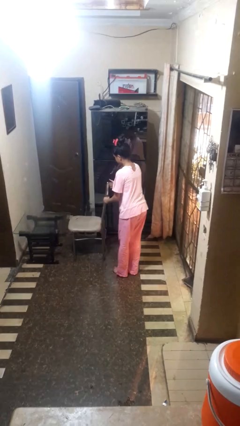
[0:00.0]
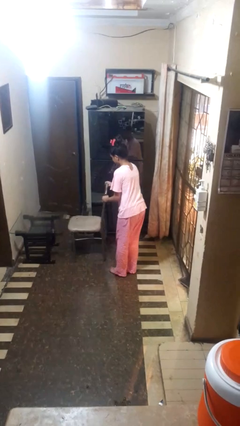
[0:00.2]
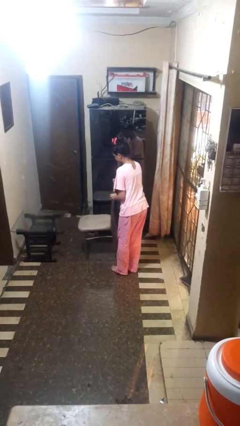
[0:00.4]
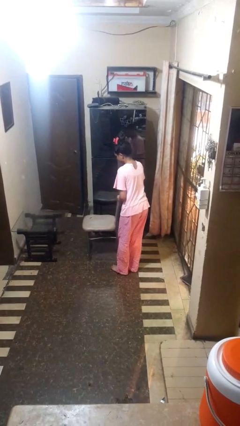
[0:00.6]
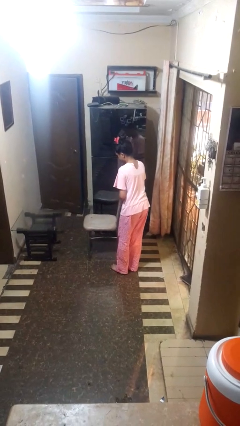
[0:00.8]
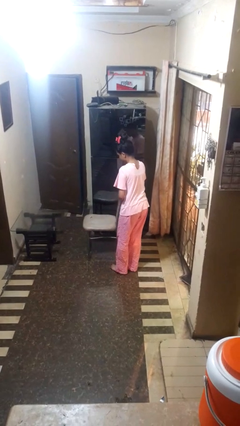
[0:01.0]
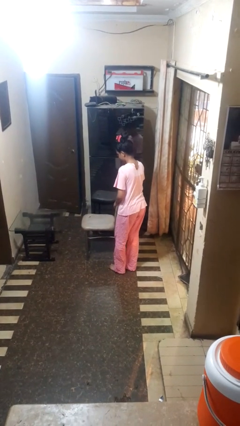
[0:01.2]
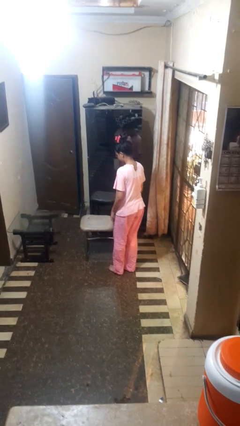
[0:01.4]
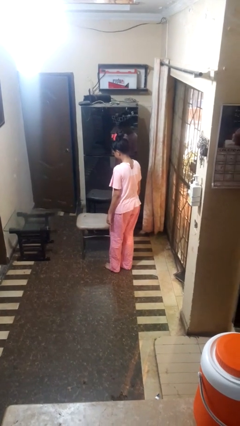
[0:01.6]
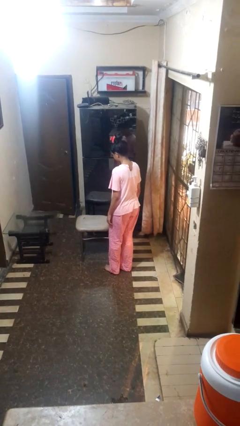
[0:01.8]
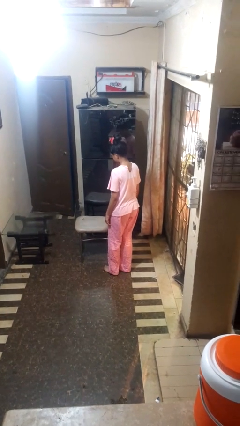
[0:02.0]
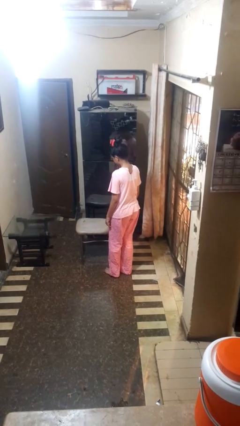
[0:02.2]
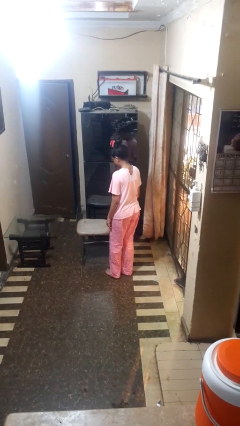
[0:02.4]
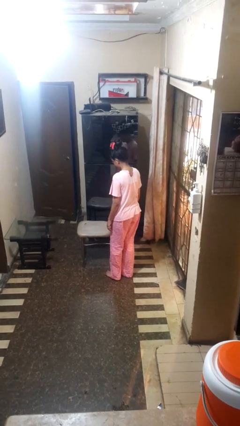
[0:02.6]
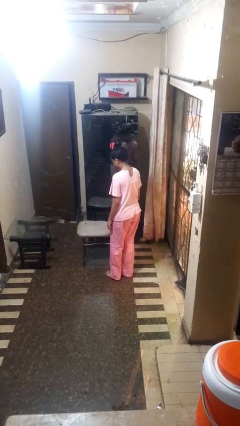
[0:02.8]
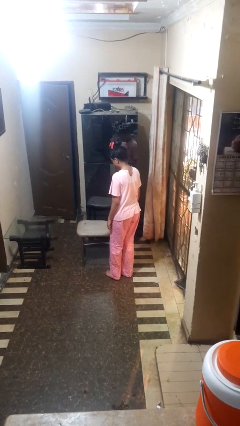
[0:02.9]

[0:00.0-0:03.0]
person pulls out chair

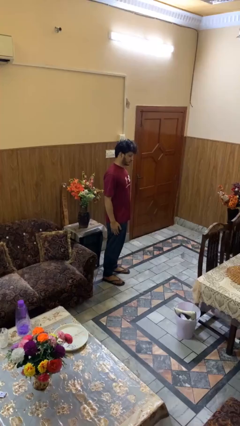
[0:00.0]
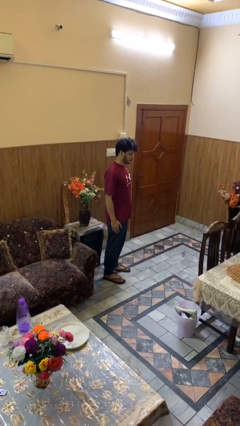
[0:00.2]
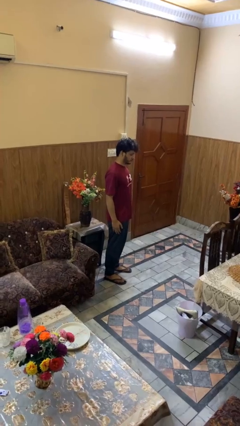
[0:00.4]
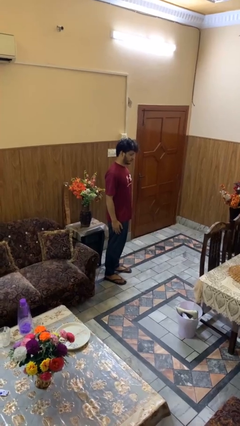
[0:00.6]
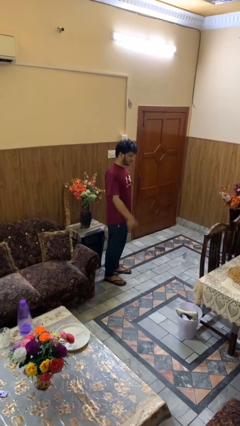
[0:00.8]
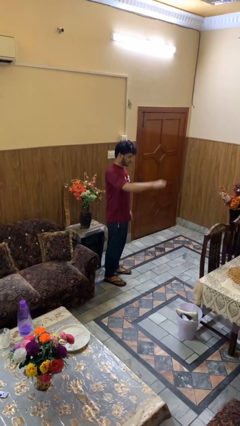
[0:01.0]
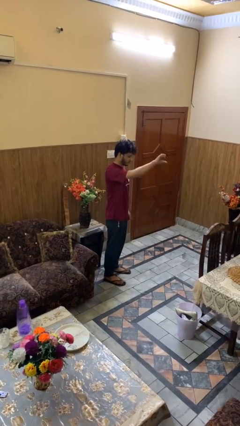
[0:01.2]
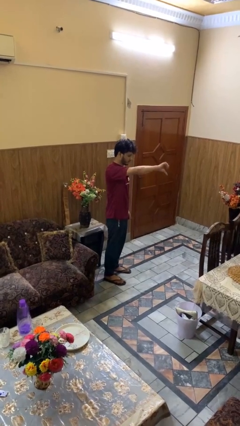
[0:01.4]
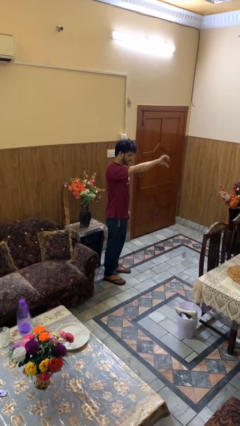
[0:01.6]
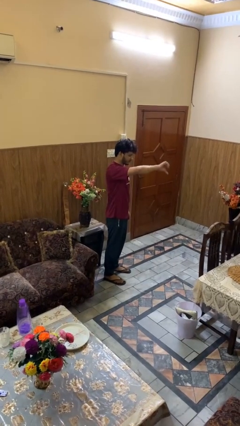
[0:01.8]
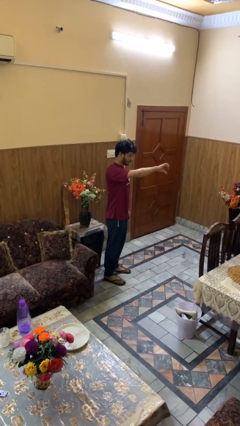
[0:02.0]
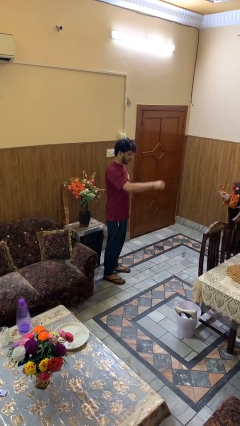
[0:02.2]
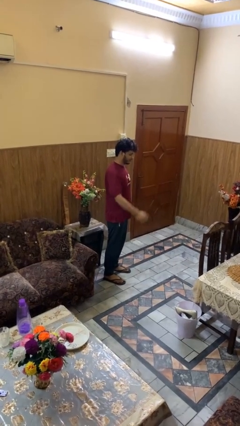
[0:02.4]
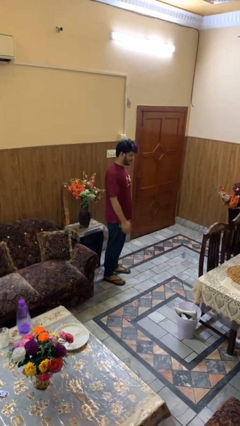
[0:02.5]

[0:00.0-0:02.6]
person gestures thumbs down

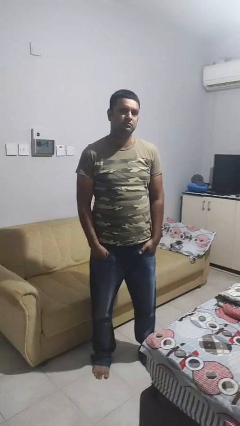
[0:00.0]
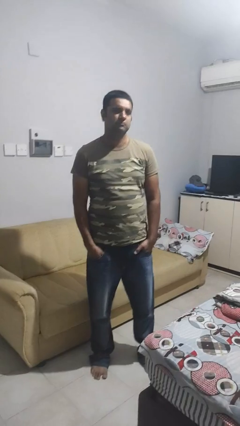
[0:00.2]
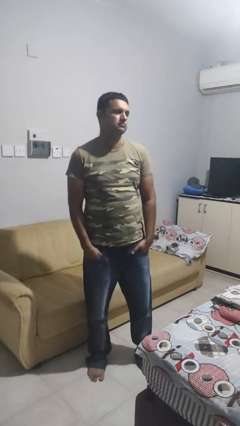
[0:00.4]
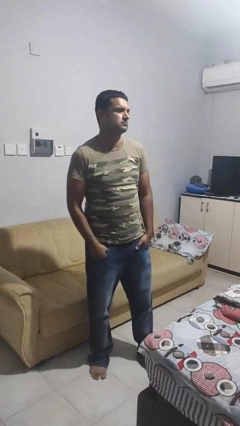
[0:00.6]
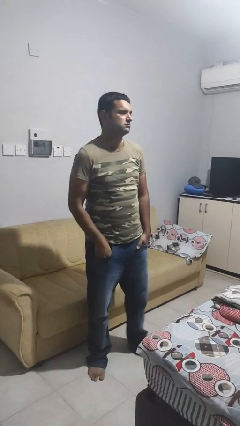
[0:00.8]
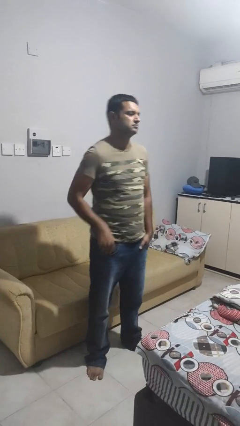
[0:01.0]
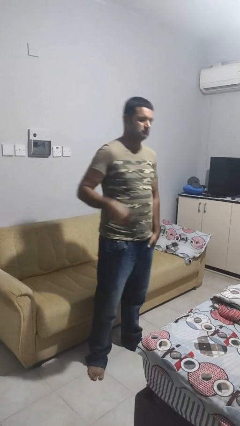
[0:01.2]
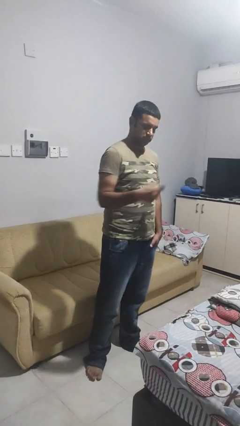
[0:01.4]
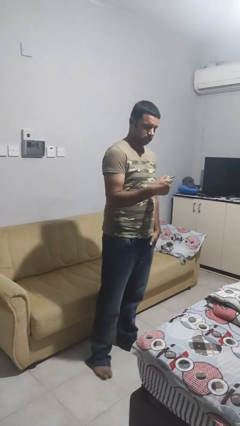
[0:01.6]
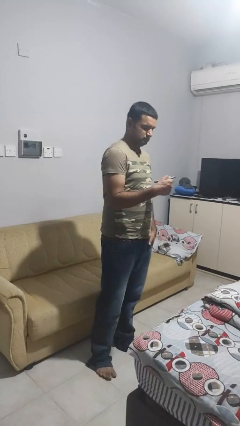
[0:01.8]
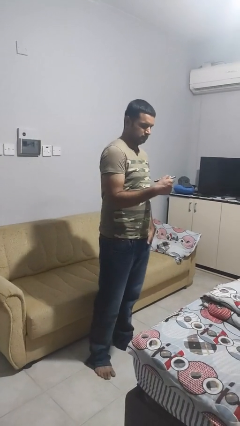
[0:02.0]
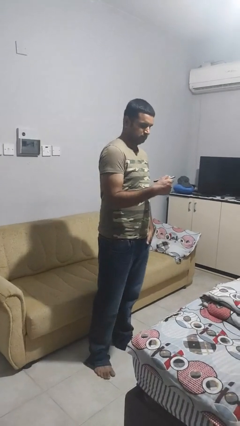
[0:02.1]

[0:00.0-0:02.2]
person takes phone from pocket

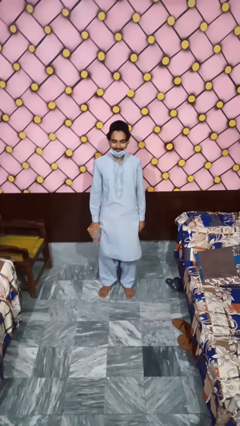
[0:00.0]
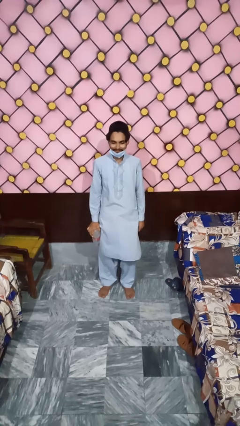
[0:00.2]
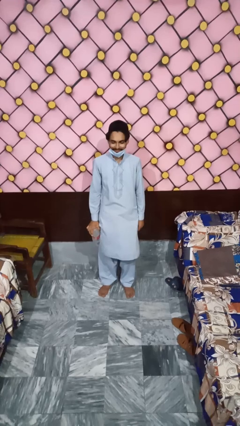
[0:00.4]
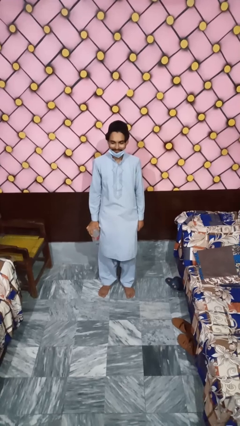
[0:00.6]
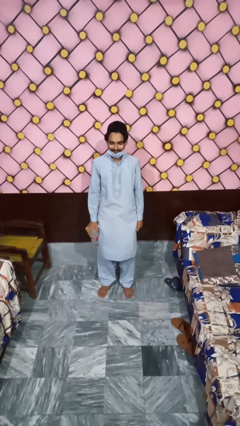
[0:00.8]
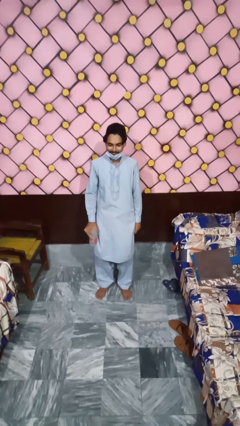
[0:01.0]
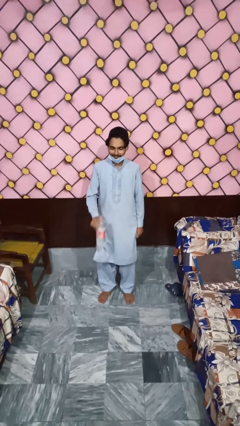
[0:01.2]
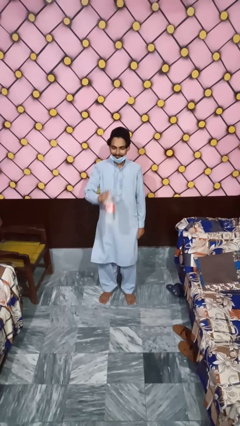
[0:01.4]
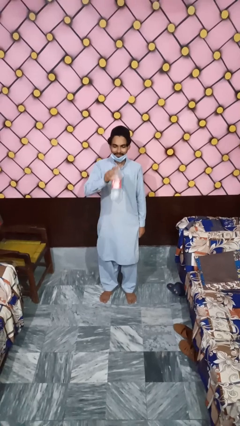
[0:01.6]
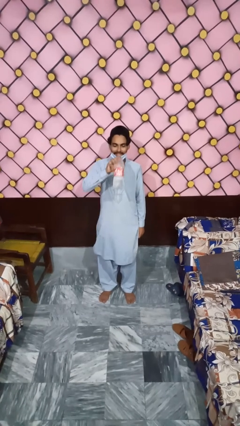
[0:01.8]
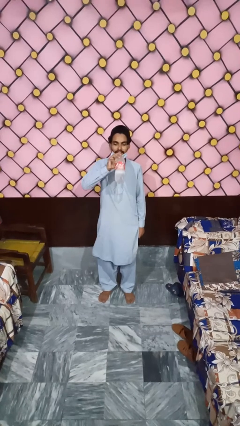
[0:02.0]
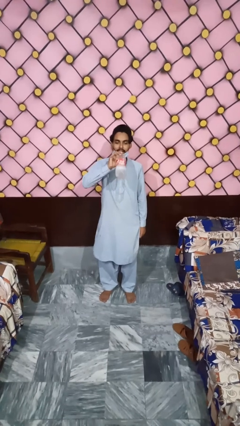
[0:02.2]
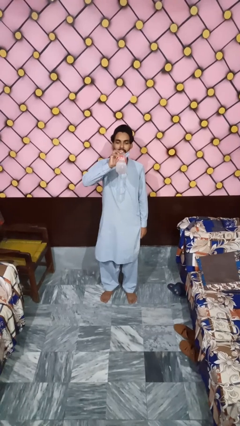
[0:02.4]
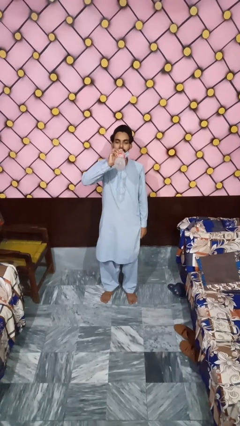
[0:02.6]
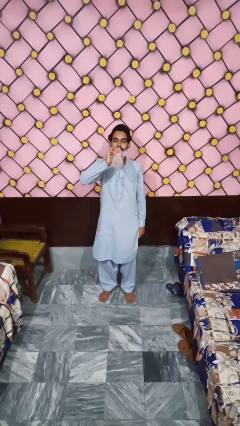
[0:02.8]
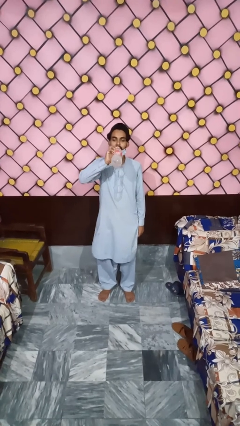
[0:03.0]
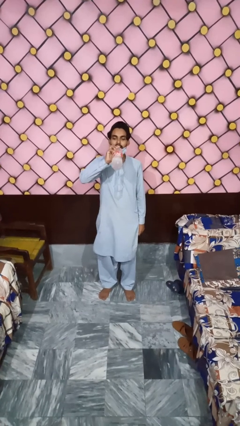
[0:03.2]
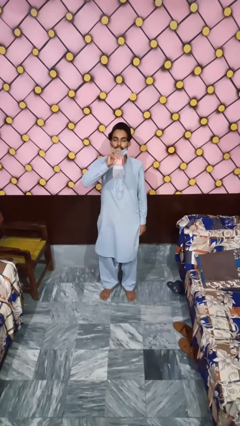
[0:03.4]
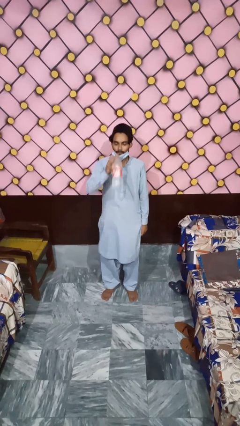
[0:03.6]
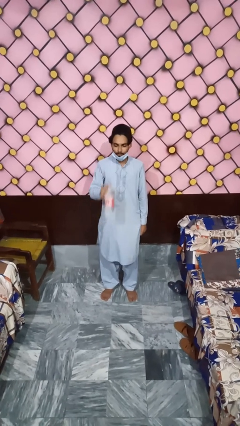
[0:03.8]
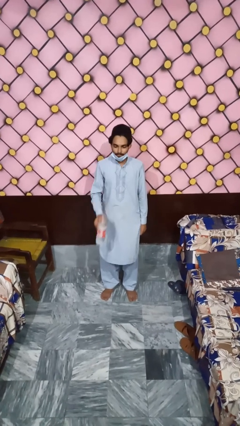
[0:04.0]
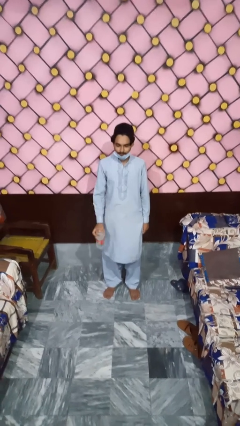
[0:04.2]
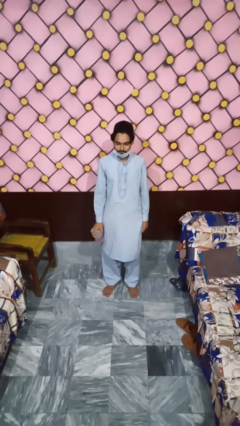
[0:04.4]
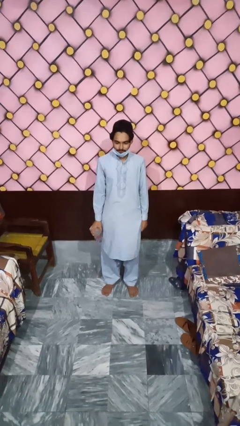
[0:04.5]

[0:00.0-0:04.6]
person drinks from bottle

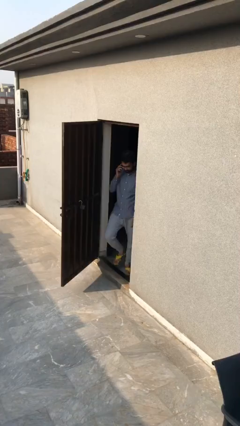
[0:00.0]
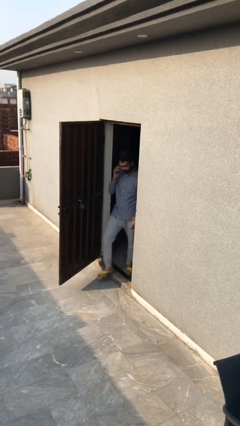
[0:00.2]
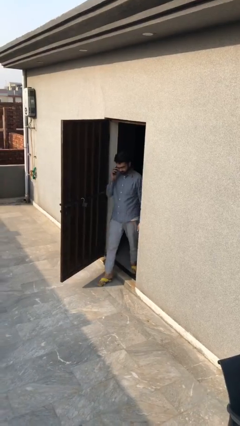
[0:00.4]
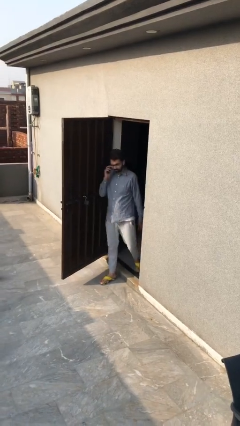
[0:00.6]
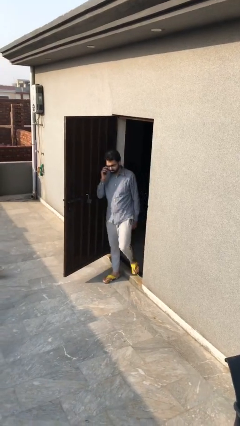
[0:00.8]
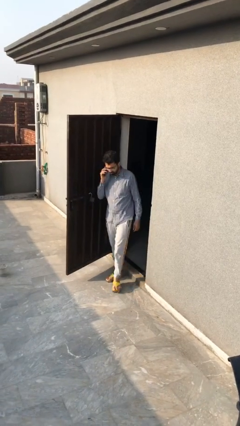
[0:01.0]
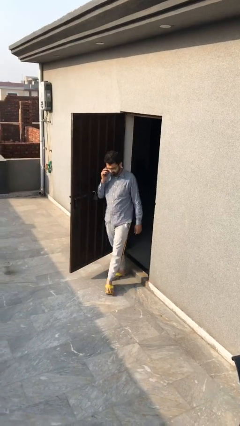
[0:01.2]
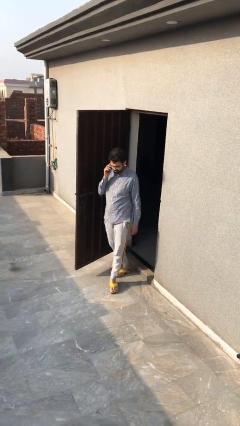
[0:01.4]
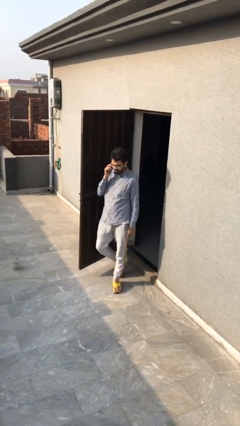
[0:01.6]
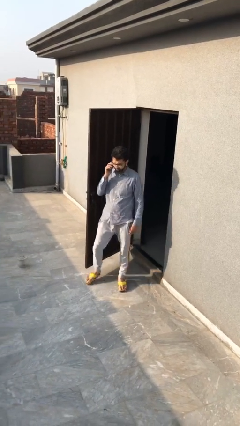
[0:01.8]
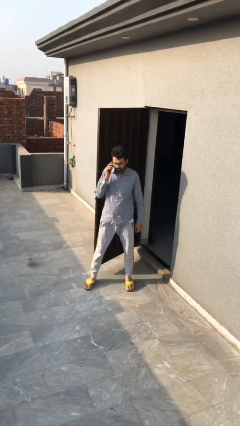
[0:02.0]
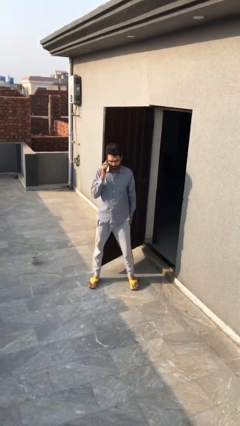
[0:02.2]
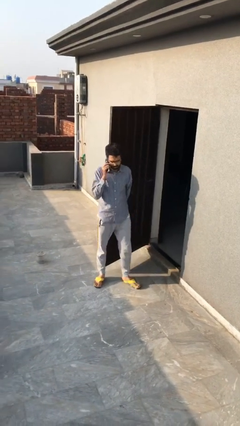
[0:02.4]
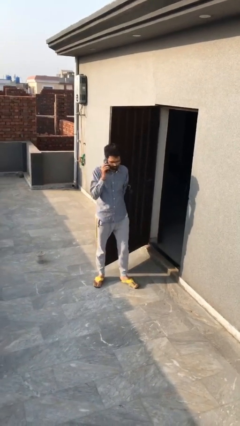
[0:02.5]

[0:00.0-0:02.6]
person enters scene through structure

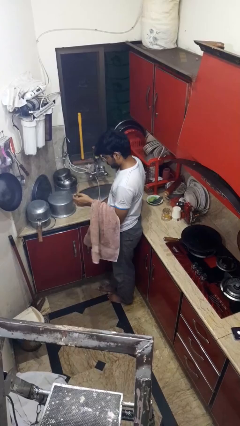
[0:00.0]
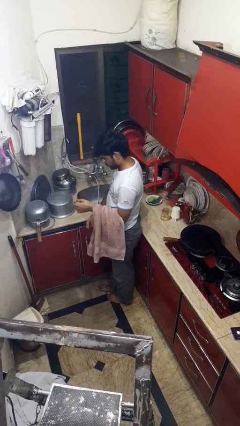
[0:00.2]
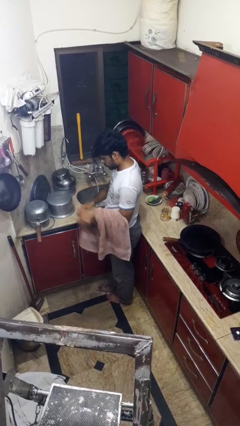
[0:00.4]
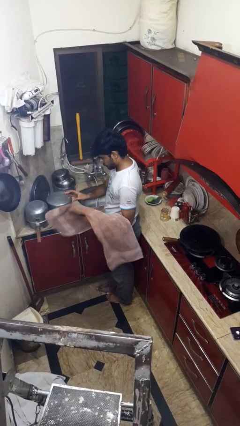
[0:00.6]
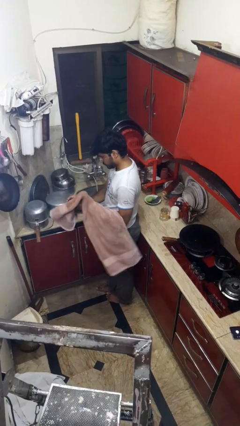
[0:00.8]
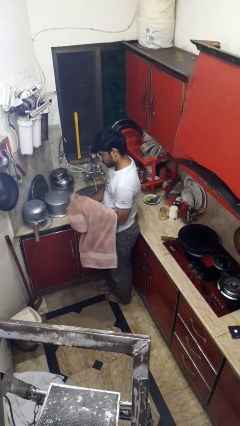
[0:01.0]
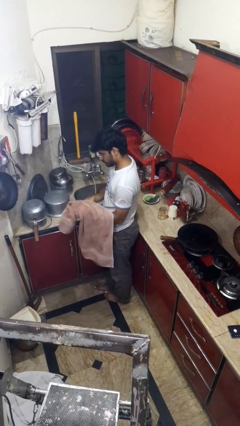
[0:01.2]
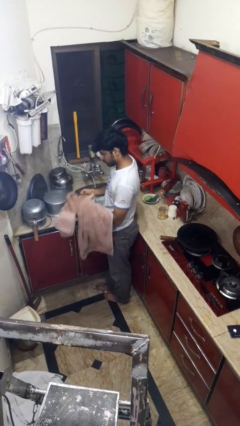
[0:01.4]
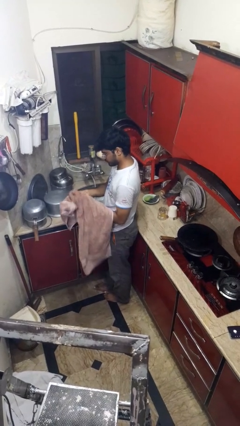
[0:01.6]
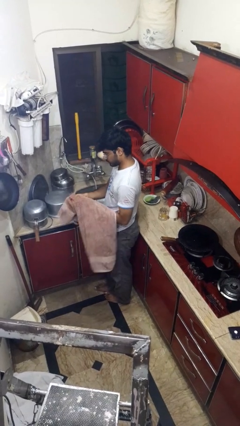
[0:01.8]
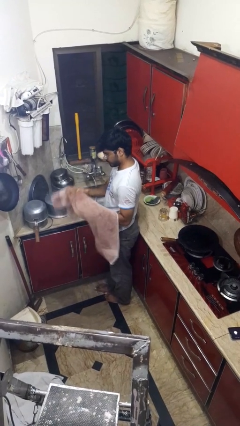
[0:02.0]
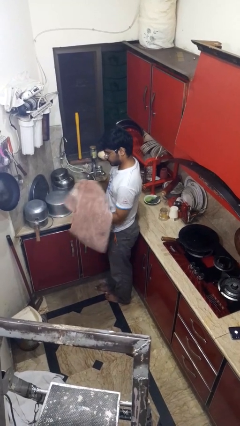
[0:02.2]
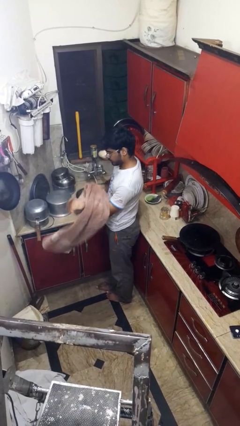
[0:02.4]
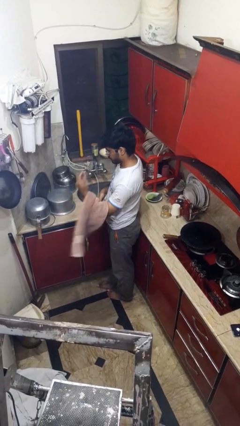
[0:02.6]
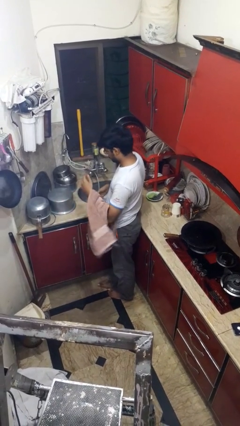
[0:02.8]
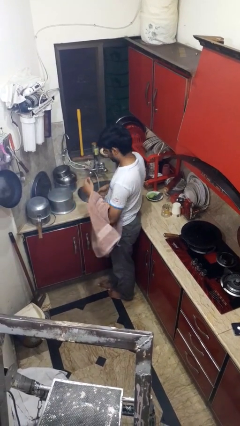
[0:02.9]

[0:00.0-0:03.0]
person dries hands with towel
